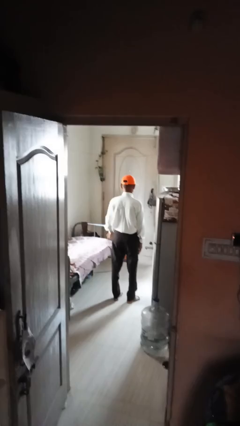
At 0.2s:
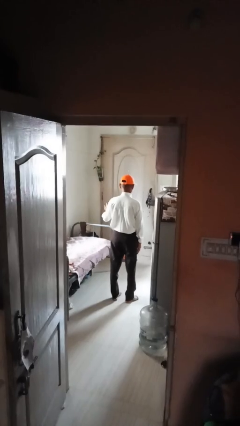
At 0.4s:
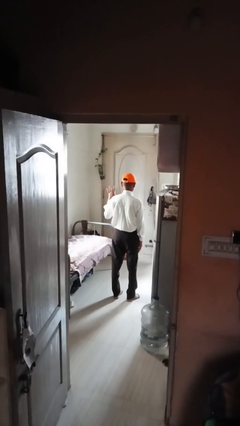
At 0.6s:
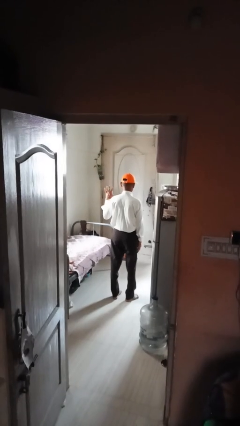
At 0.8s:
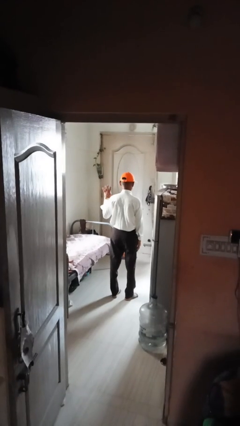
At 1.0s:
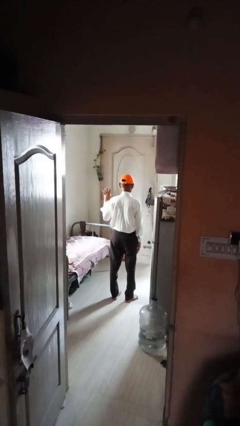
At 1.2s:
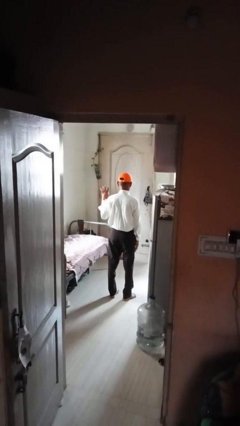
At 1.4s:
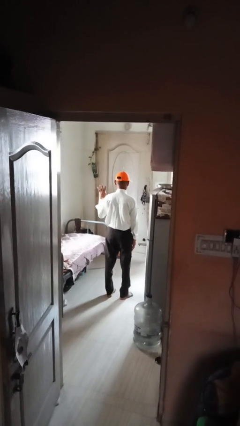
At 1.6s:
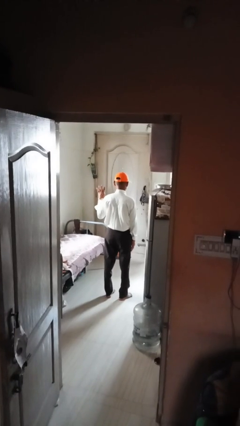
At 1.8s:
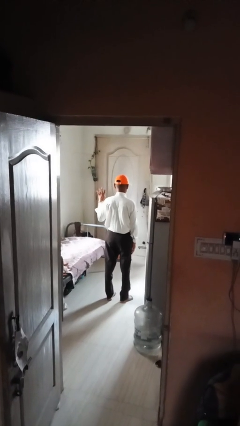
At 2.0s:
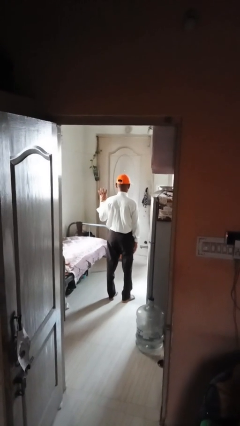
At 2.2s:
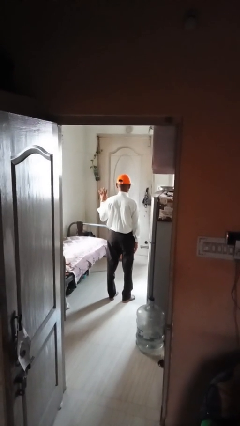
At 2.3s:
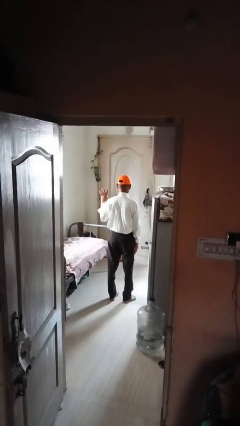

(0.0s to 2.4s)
person gestures number four

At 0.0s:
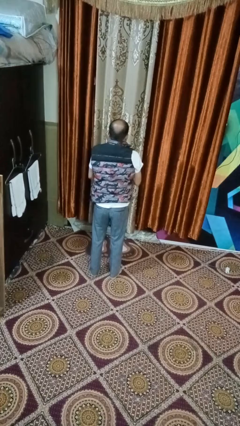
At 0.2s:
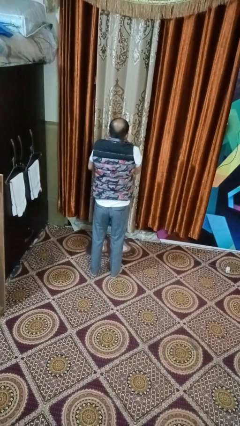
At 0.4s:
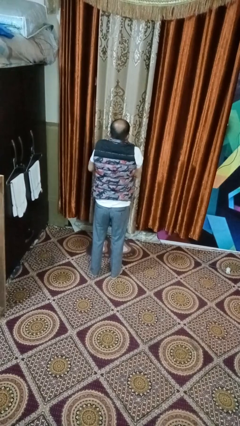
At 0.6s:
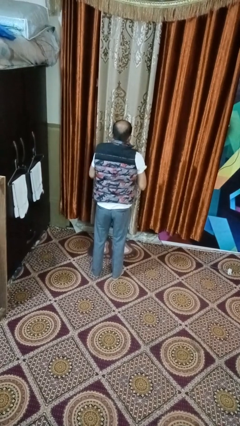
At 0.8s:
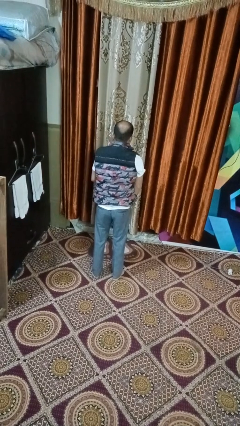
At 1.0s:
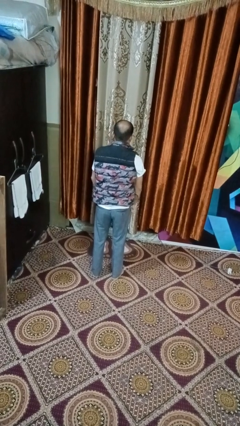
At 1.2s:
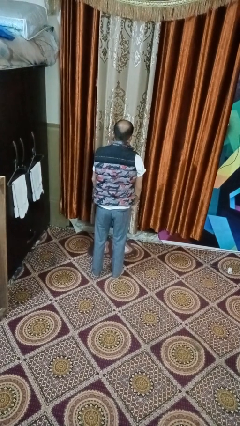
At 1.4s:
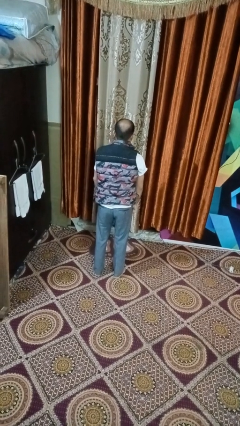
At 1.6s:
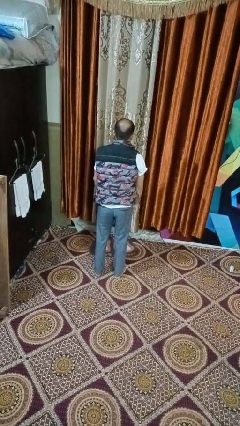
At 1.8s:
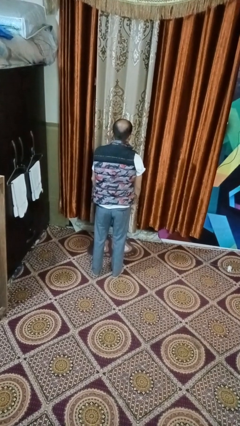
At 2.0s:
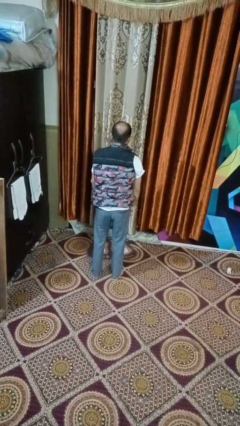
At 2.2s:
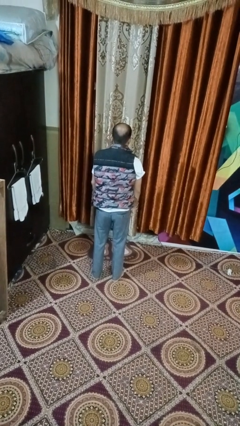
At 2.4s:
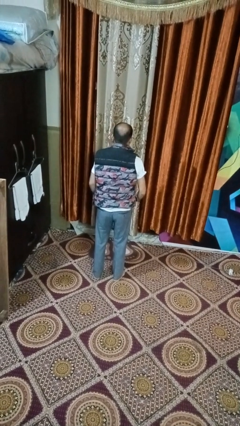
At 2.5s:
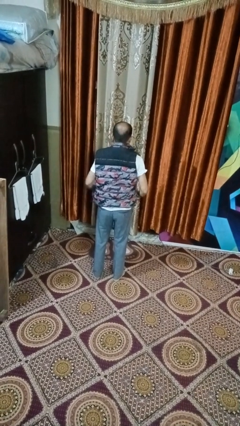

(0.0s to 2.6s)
person unzips jacket

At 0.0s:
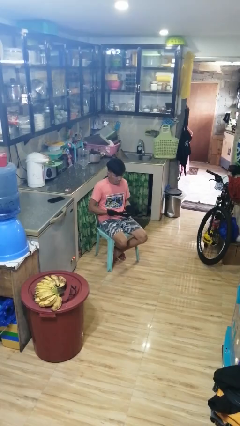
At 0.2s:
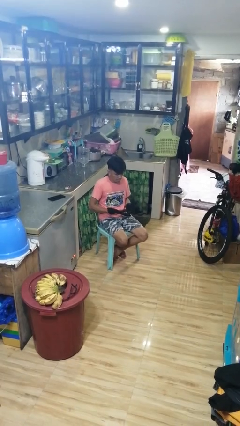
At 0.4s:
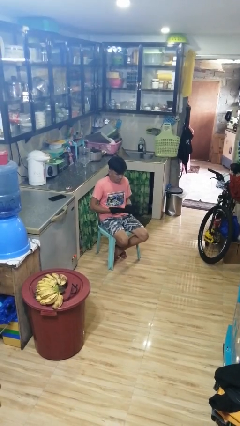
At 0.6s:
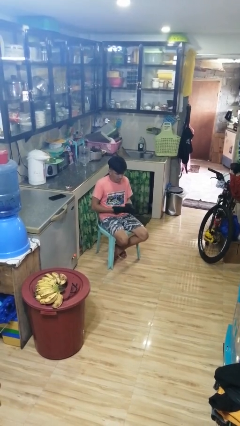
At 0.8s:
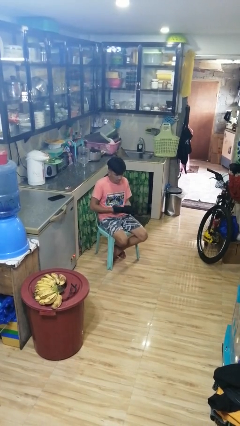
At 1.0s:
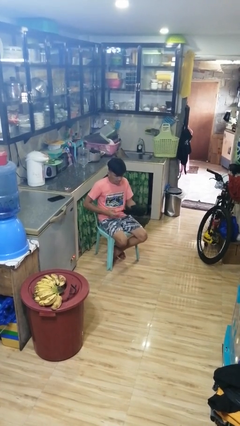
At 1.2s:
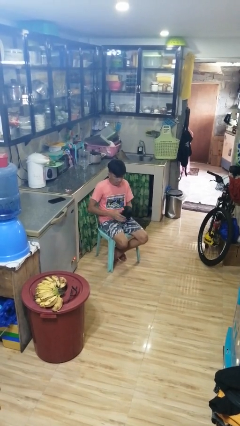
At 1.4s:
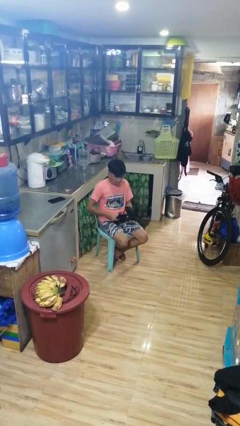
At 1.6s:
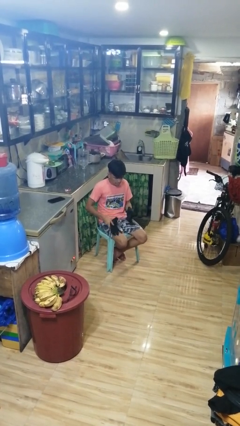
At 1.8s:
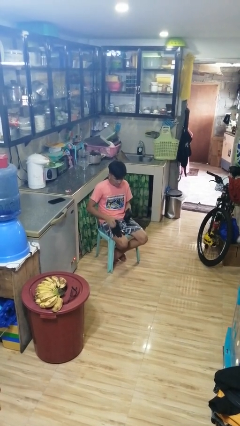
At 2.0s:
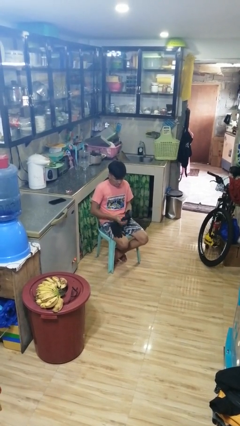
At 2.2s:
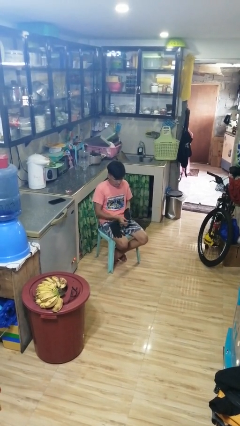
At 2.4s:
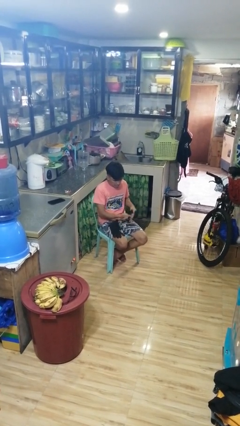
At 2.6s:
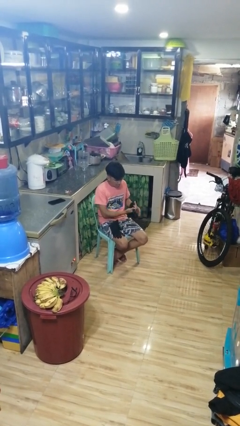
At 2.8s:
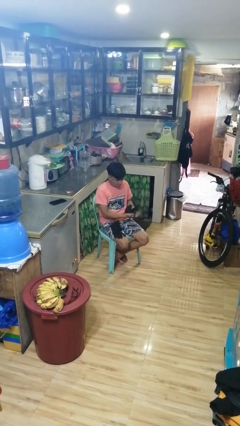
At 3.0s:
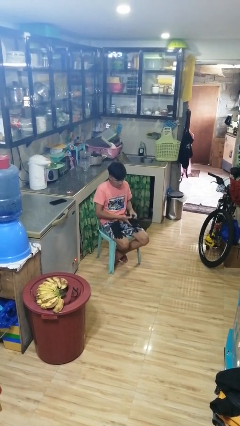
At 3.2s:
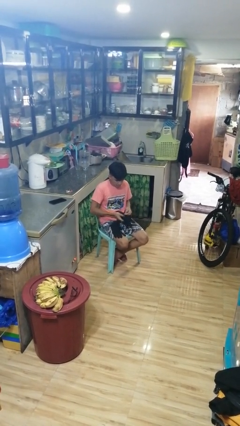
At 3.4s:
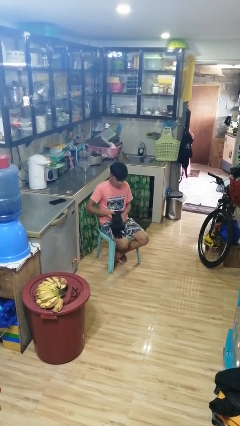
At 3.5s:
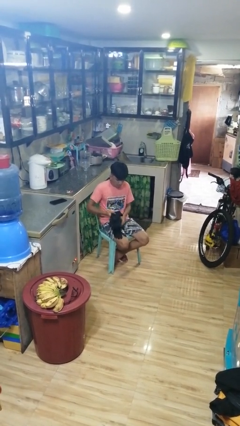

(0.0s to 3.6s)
person takes off gloves

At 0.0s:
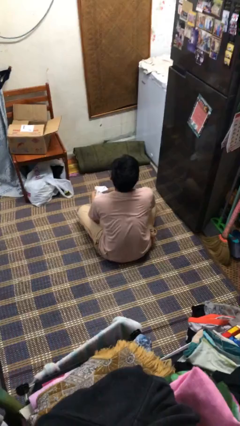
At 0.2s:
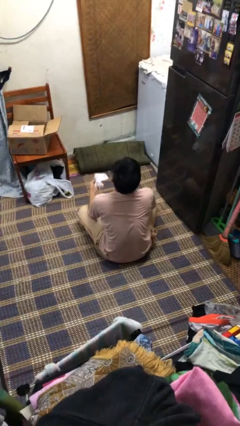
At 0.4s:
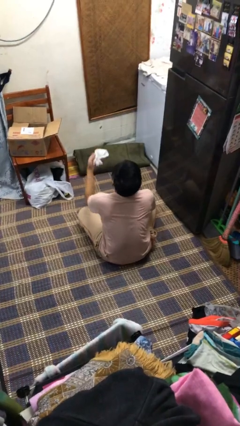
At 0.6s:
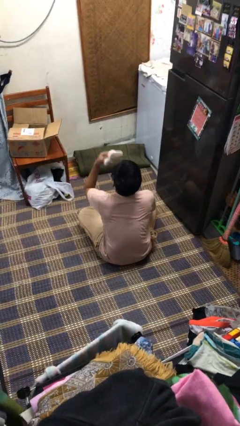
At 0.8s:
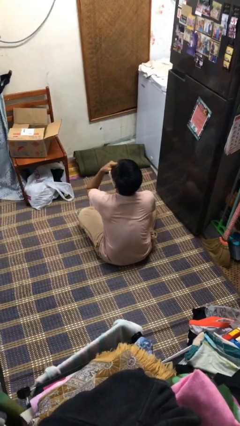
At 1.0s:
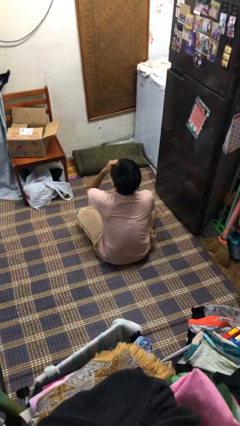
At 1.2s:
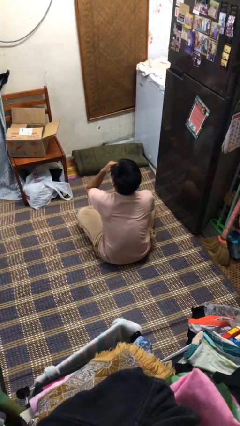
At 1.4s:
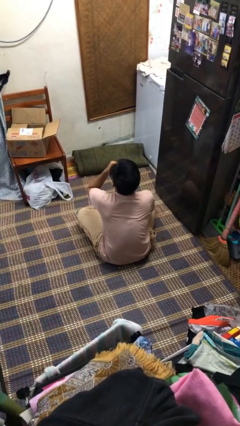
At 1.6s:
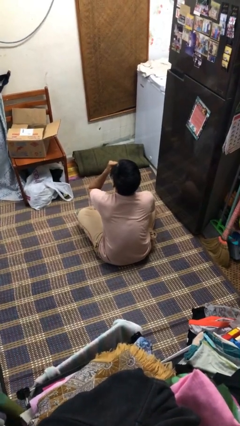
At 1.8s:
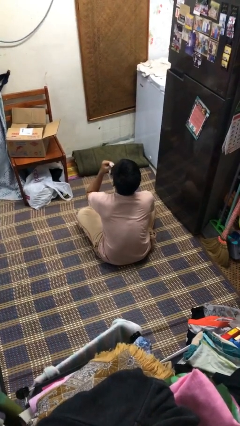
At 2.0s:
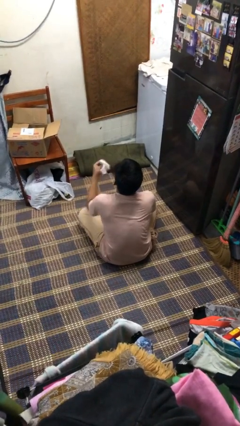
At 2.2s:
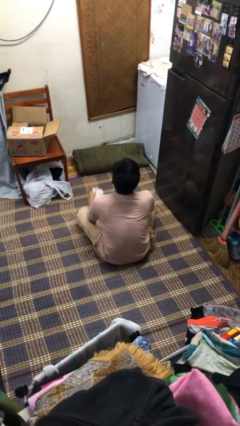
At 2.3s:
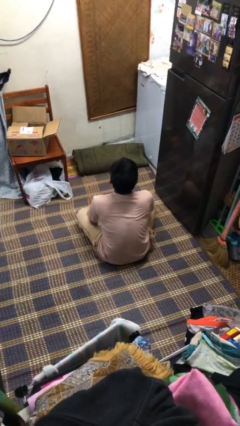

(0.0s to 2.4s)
person blows nose

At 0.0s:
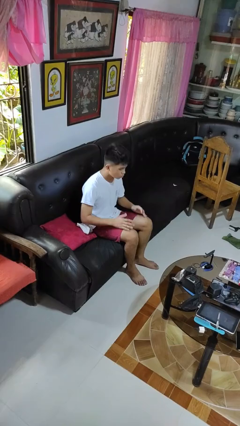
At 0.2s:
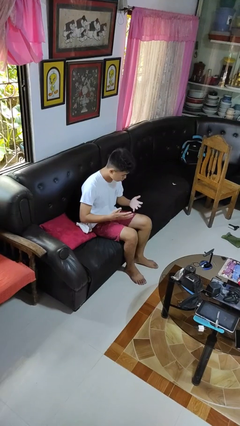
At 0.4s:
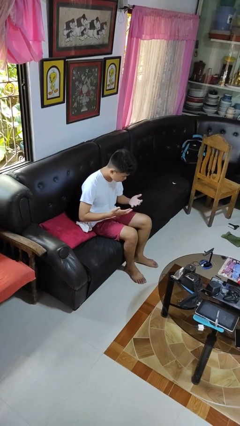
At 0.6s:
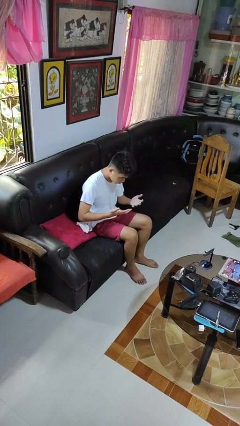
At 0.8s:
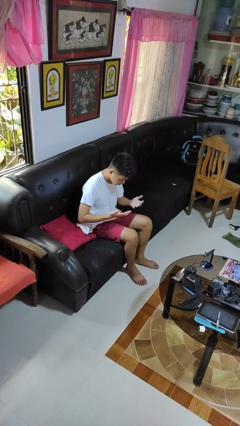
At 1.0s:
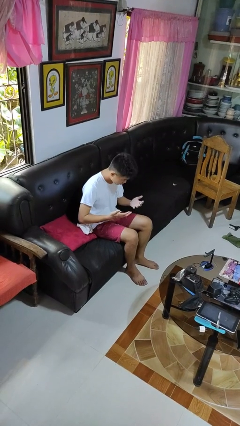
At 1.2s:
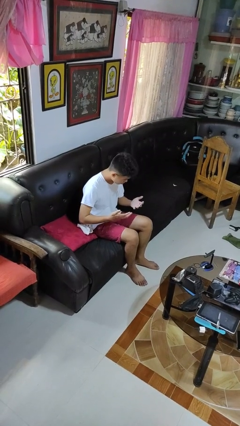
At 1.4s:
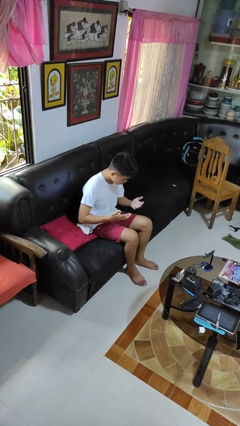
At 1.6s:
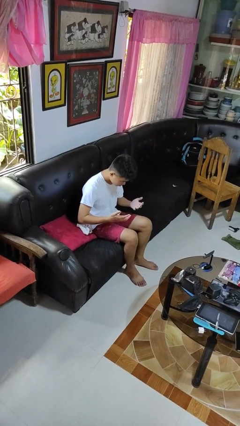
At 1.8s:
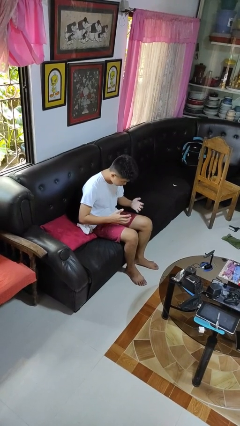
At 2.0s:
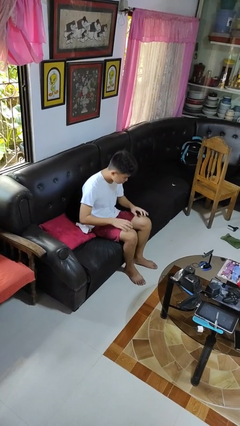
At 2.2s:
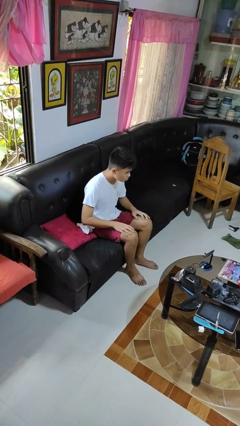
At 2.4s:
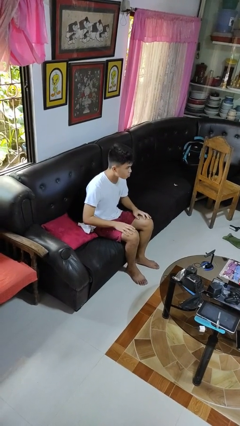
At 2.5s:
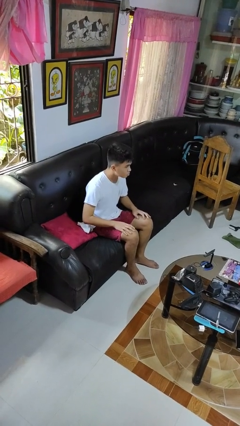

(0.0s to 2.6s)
person looks at hands in lap

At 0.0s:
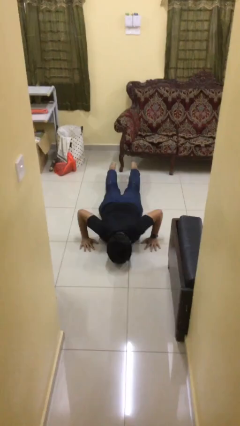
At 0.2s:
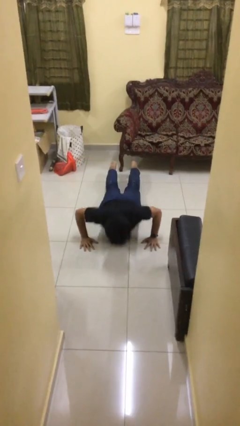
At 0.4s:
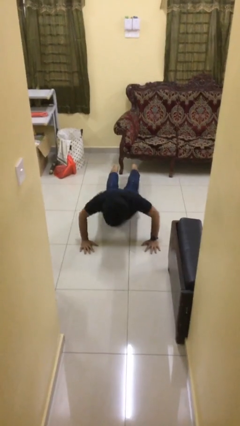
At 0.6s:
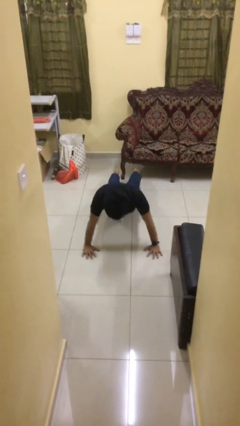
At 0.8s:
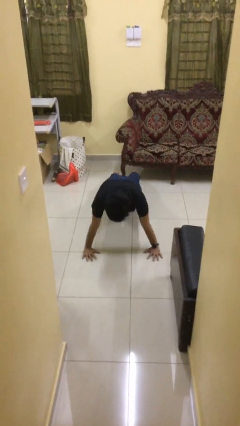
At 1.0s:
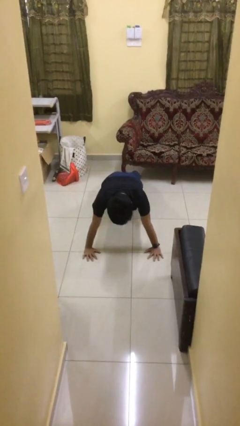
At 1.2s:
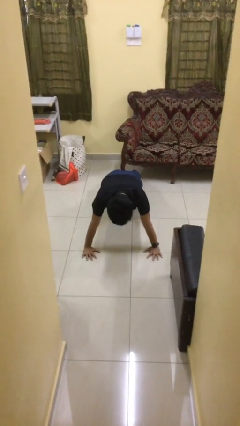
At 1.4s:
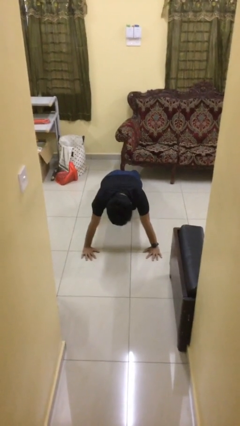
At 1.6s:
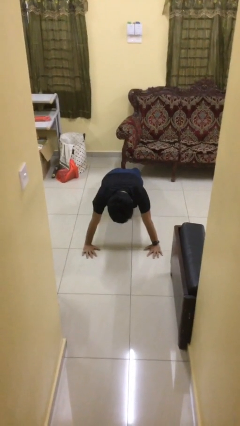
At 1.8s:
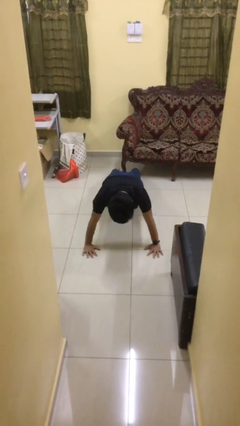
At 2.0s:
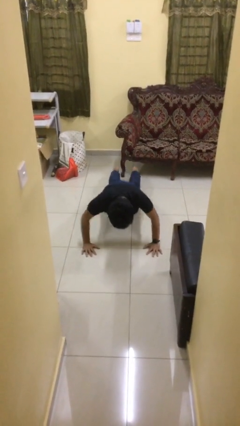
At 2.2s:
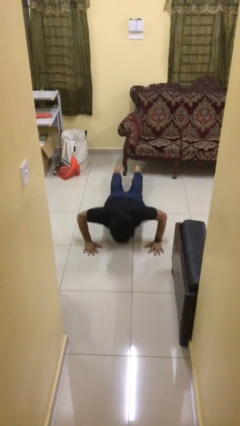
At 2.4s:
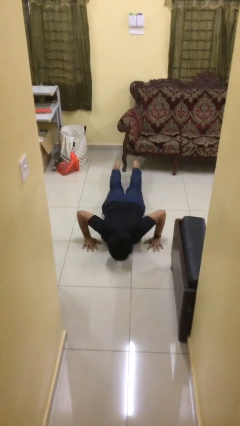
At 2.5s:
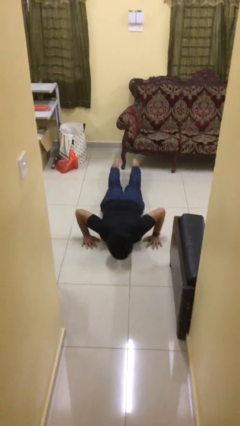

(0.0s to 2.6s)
person exercises with pushup

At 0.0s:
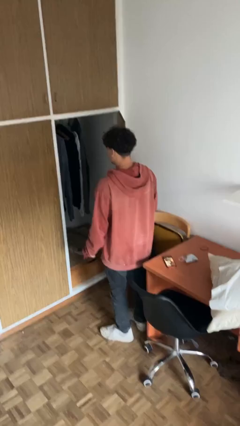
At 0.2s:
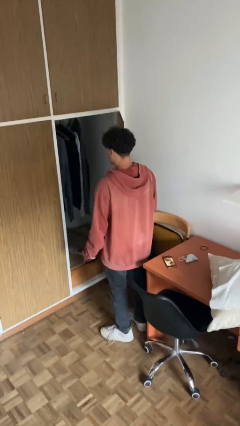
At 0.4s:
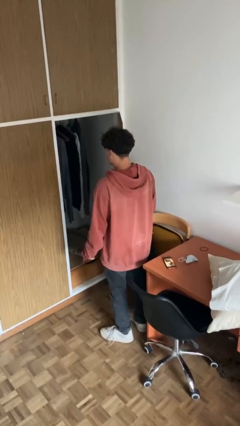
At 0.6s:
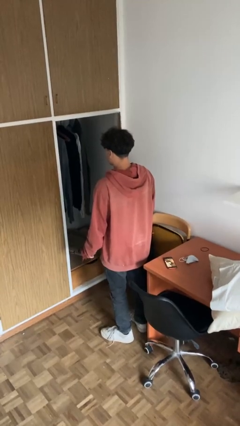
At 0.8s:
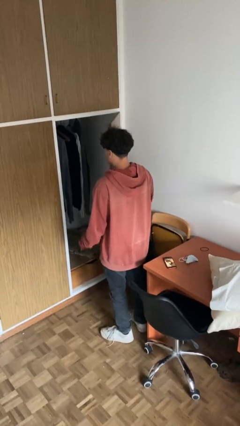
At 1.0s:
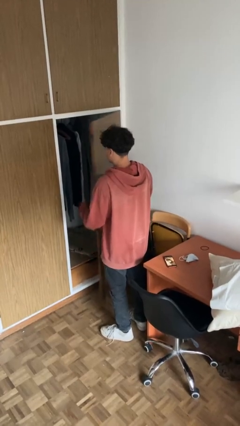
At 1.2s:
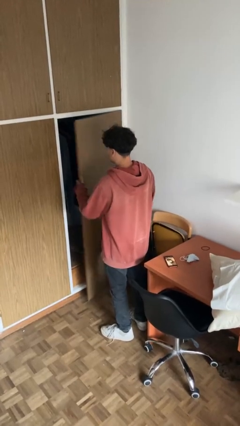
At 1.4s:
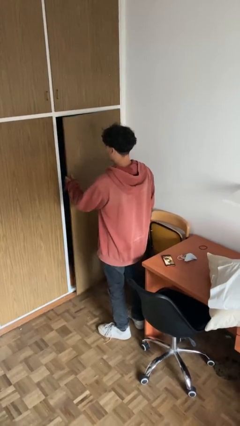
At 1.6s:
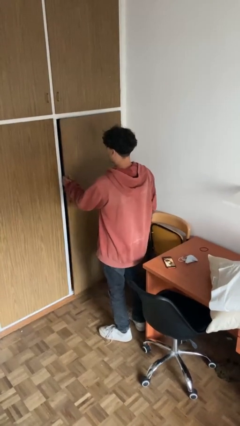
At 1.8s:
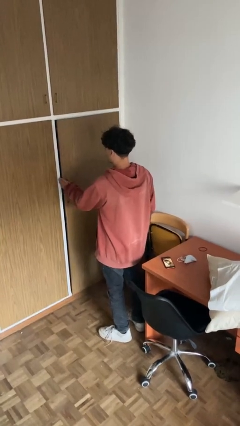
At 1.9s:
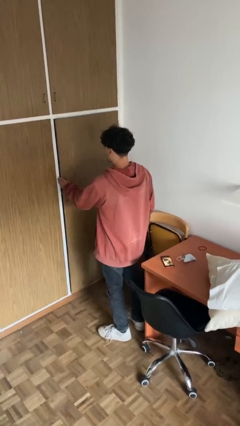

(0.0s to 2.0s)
person closes closet door
